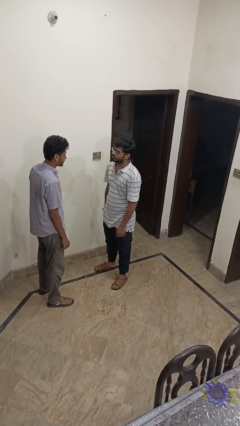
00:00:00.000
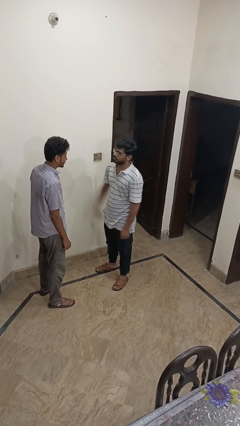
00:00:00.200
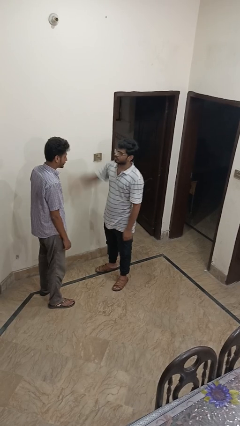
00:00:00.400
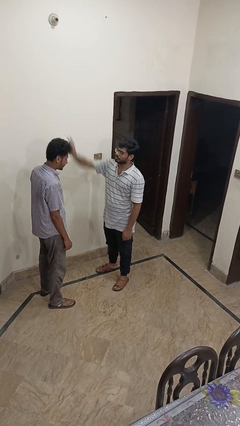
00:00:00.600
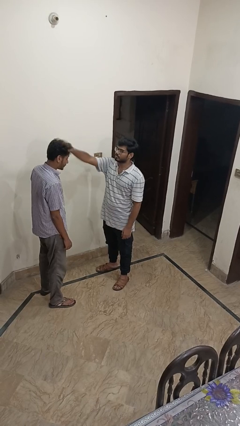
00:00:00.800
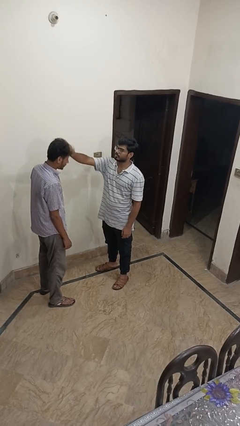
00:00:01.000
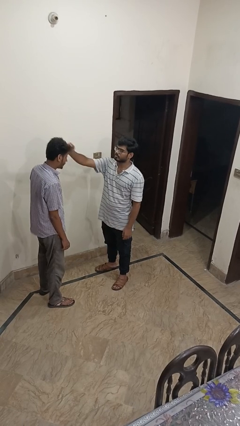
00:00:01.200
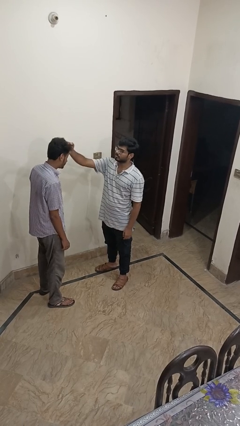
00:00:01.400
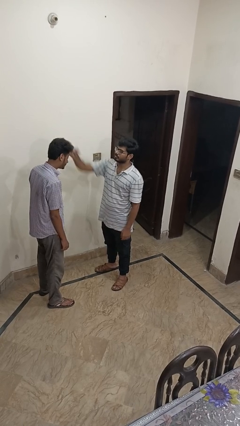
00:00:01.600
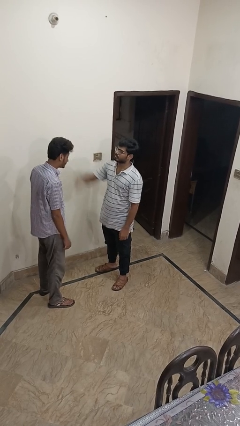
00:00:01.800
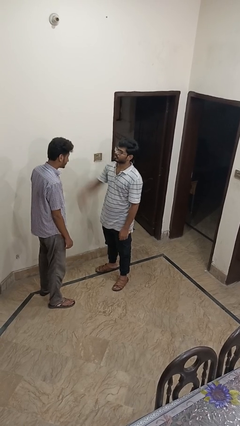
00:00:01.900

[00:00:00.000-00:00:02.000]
person grabs person by hair

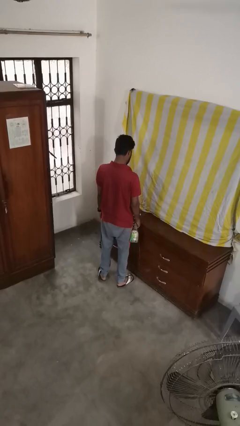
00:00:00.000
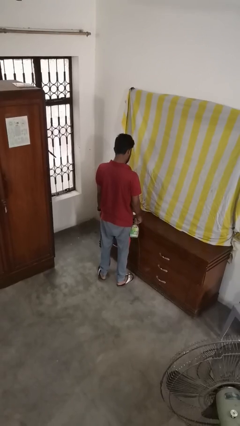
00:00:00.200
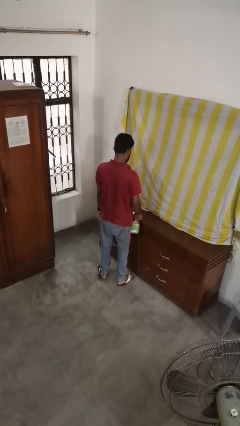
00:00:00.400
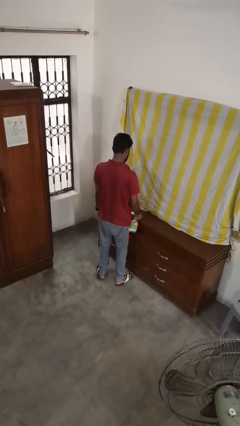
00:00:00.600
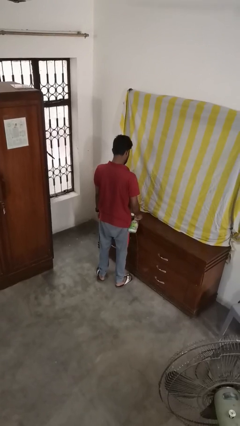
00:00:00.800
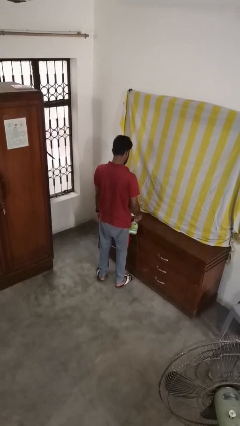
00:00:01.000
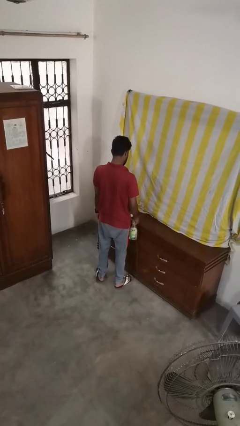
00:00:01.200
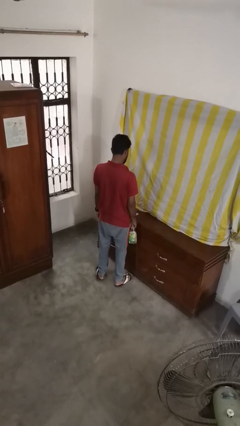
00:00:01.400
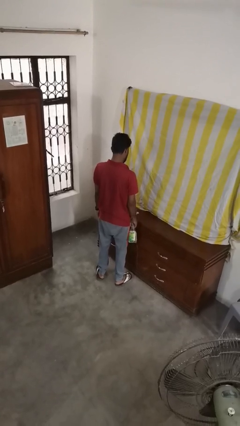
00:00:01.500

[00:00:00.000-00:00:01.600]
person sprays from bottle

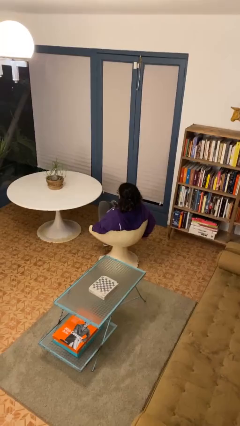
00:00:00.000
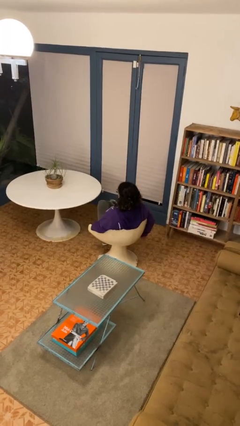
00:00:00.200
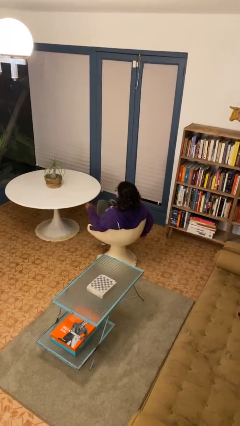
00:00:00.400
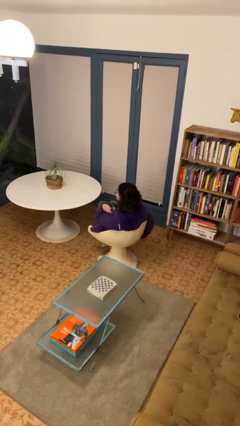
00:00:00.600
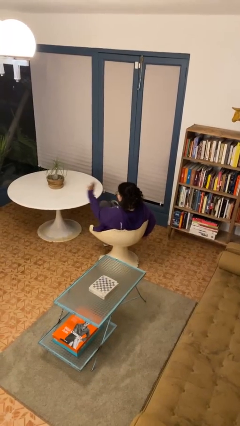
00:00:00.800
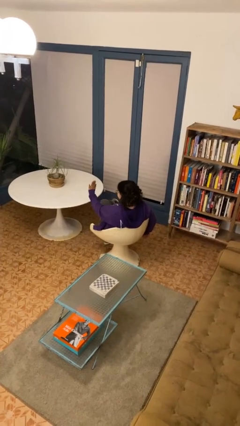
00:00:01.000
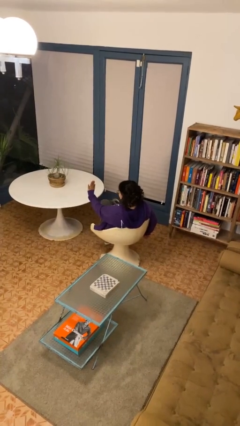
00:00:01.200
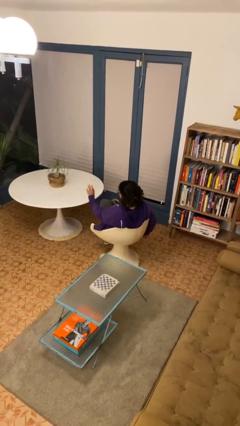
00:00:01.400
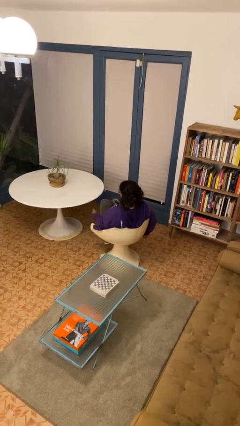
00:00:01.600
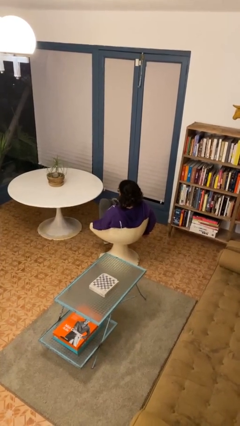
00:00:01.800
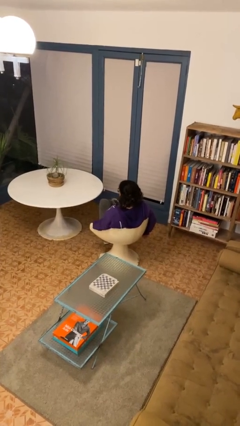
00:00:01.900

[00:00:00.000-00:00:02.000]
person gestures stop

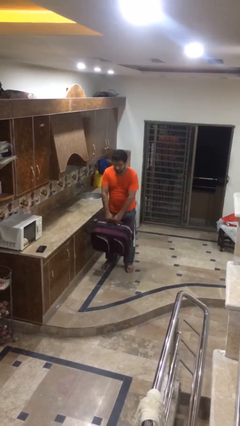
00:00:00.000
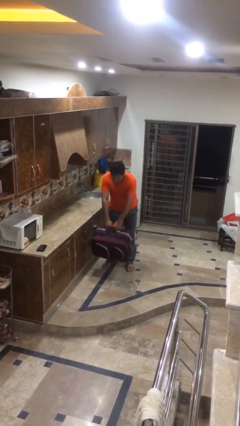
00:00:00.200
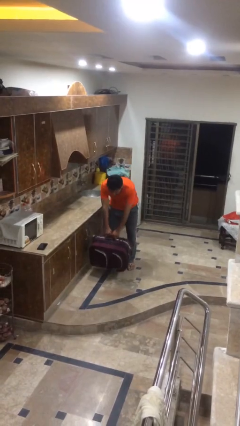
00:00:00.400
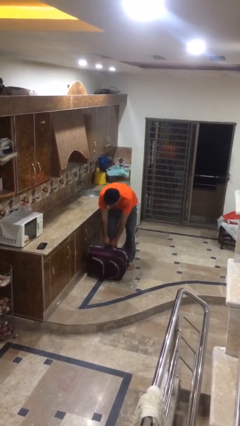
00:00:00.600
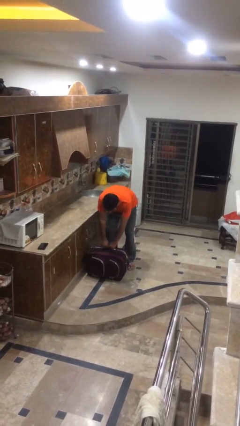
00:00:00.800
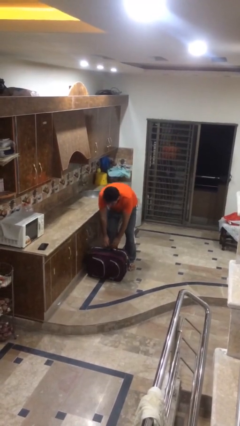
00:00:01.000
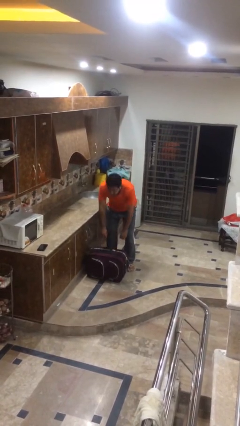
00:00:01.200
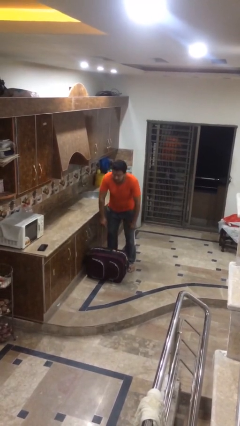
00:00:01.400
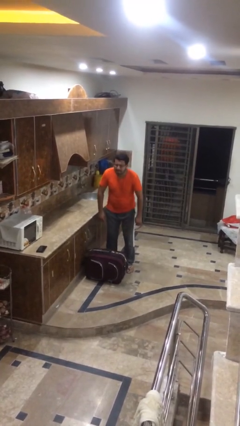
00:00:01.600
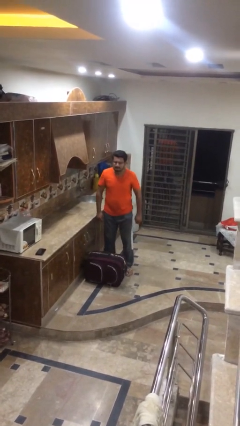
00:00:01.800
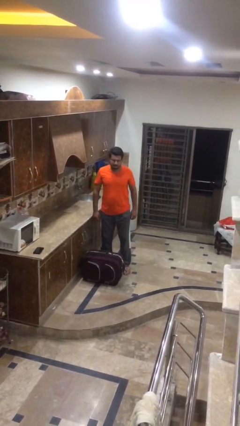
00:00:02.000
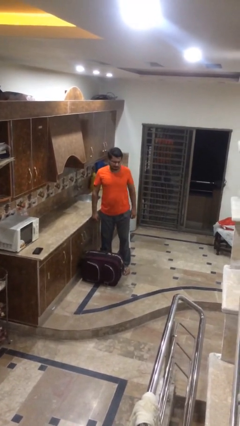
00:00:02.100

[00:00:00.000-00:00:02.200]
person puts down object on floor

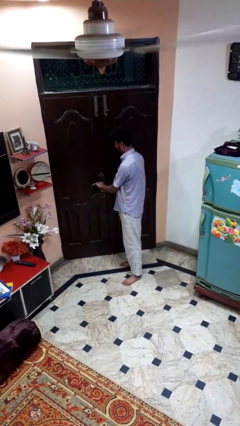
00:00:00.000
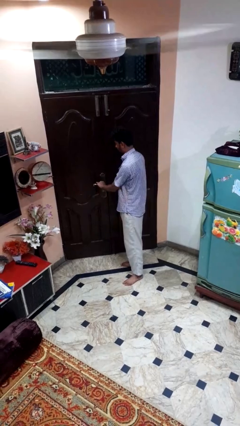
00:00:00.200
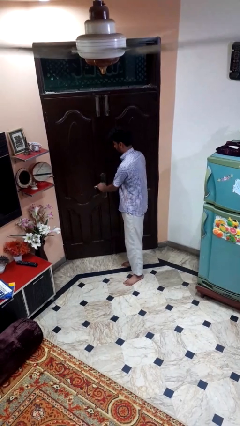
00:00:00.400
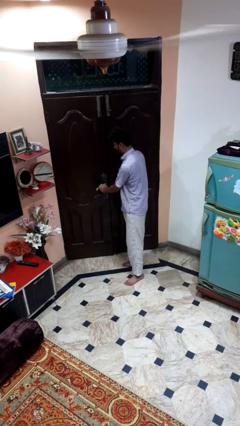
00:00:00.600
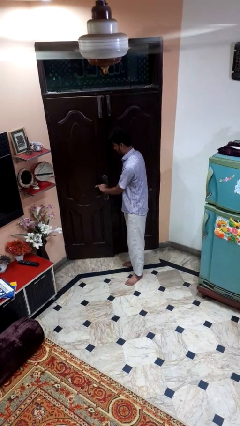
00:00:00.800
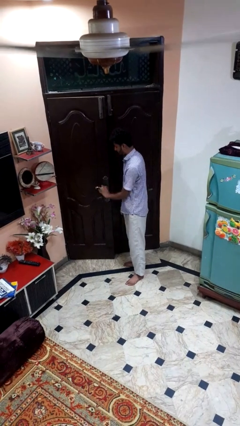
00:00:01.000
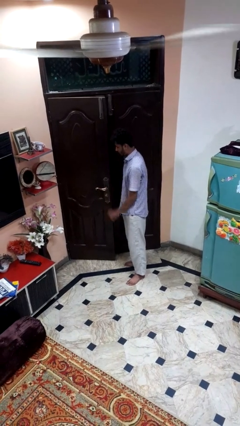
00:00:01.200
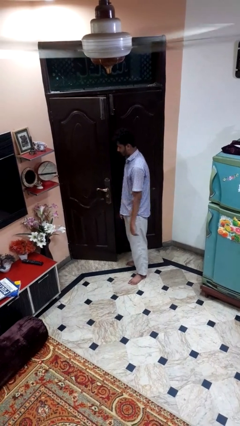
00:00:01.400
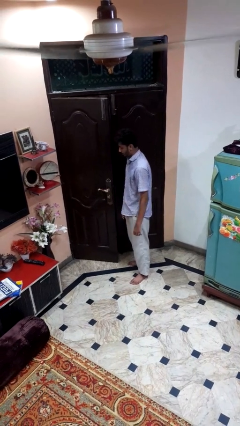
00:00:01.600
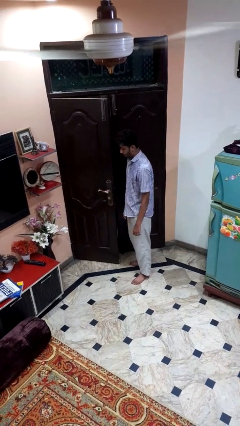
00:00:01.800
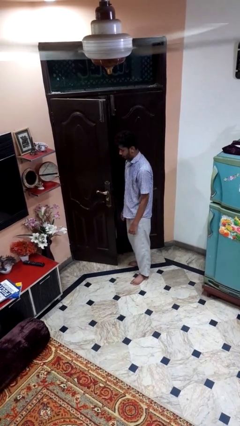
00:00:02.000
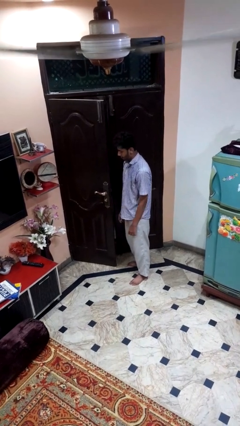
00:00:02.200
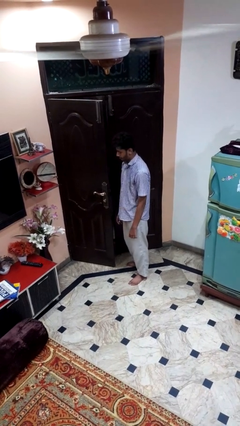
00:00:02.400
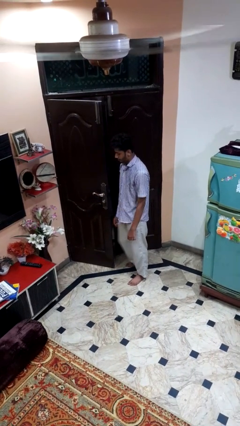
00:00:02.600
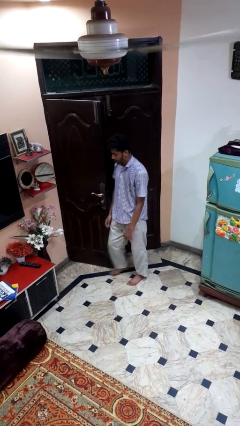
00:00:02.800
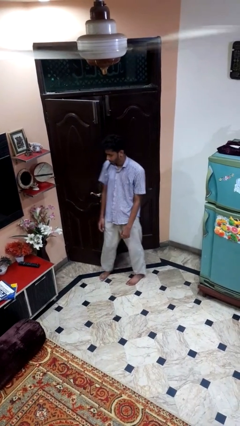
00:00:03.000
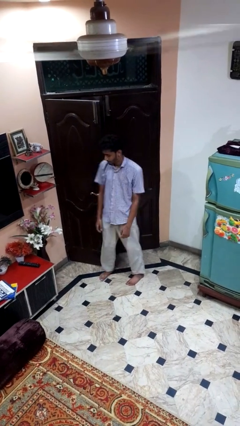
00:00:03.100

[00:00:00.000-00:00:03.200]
person opens facility door

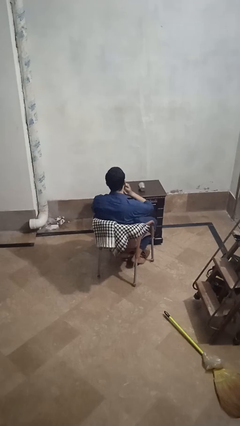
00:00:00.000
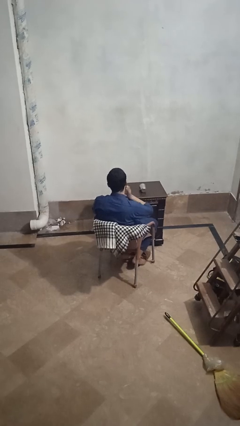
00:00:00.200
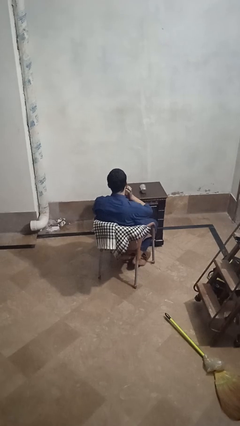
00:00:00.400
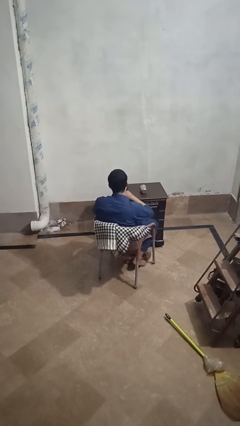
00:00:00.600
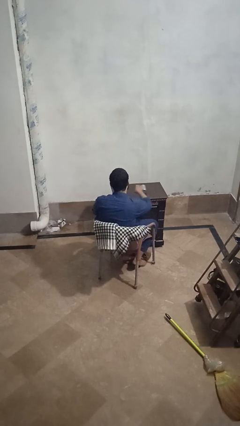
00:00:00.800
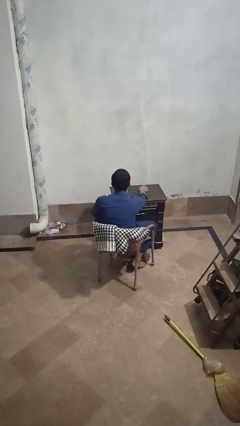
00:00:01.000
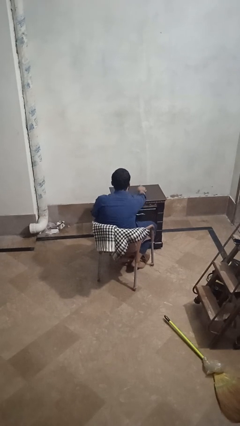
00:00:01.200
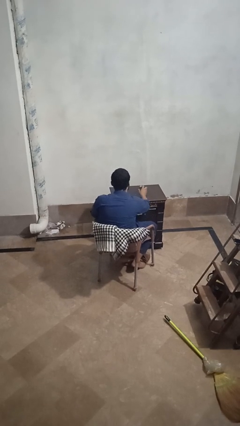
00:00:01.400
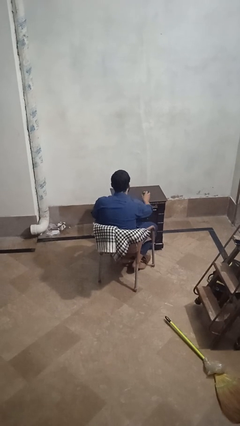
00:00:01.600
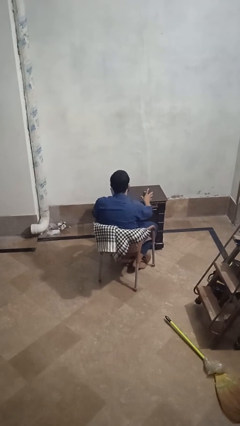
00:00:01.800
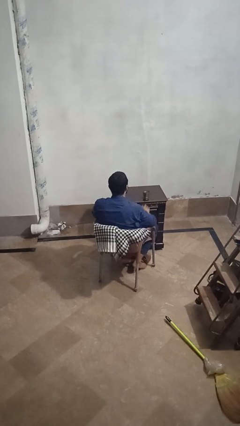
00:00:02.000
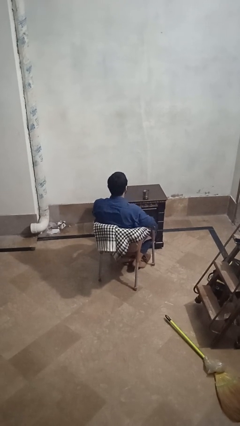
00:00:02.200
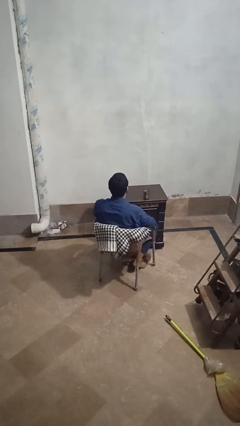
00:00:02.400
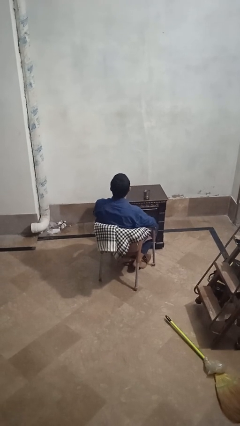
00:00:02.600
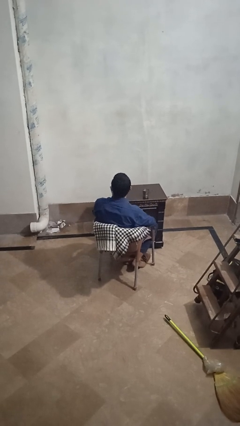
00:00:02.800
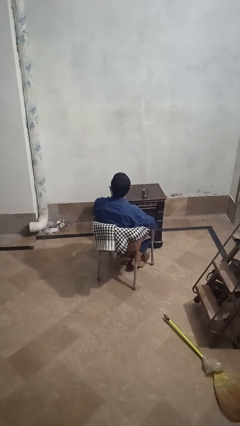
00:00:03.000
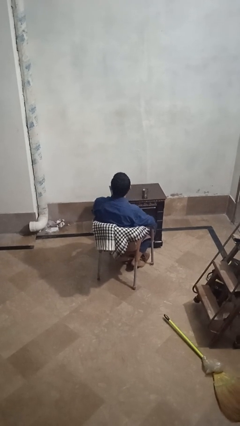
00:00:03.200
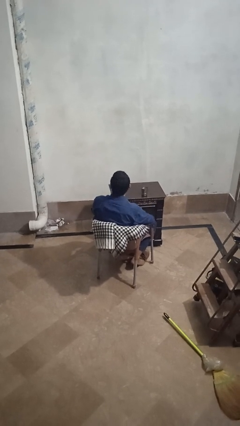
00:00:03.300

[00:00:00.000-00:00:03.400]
person sets upright glass

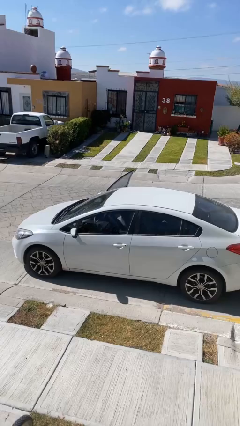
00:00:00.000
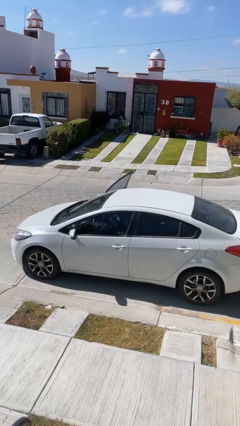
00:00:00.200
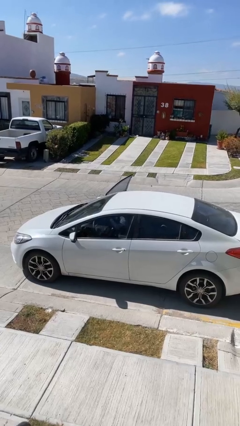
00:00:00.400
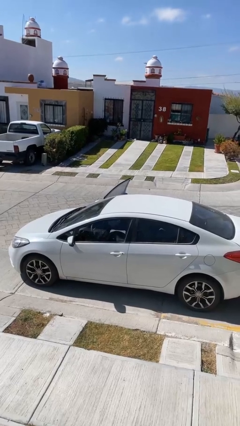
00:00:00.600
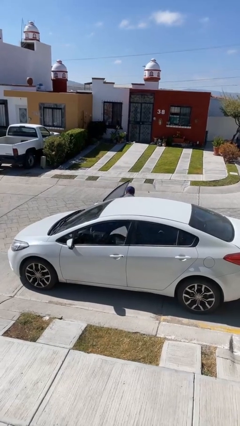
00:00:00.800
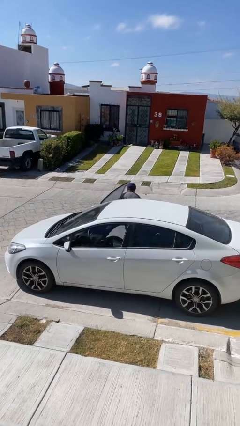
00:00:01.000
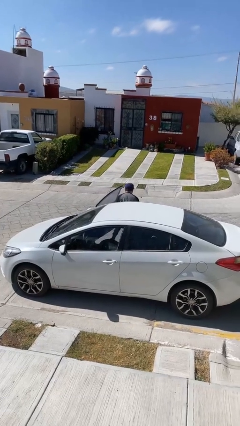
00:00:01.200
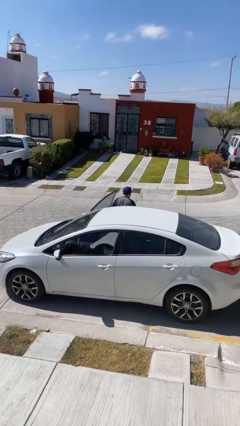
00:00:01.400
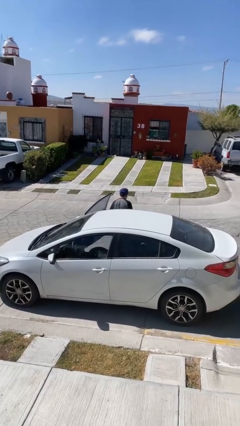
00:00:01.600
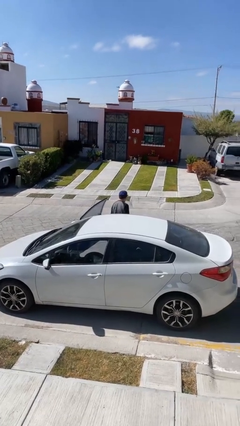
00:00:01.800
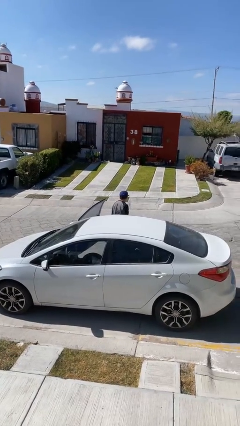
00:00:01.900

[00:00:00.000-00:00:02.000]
person exits car

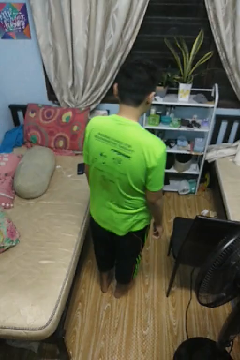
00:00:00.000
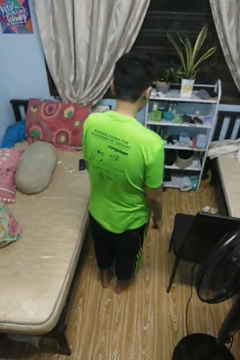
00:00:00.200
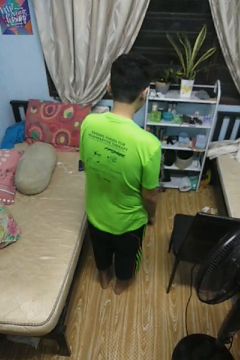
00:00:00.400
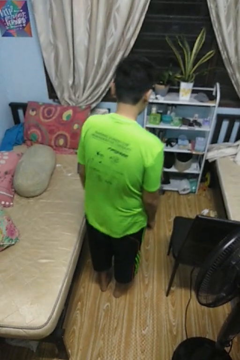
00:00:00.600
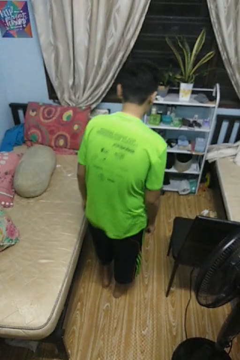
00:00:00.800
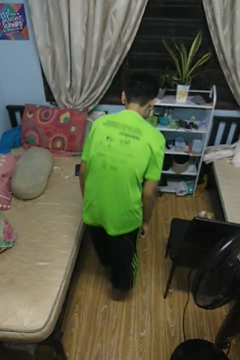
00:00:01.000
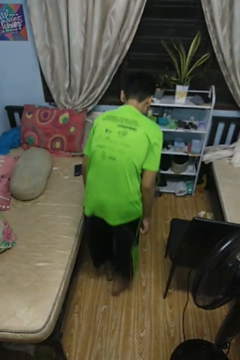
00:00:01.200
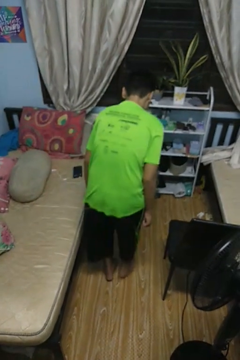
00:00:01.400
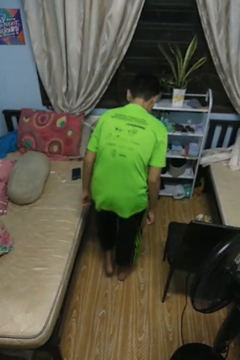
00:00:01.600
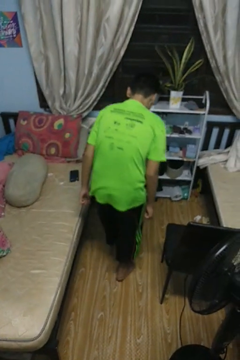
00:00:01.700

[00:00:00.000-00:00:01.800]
person walks tiptoe
